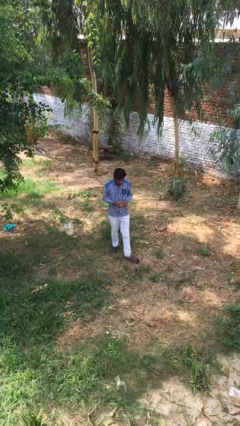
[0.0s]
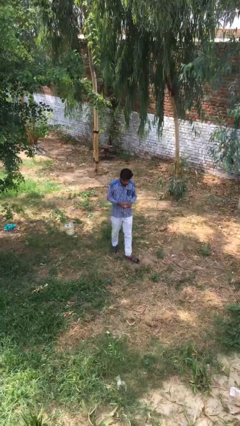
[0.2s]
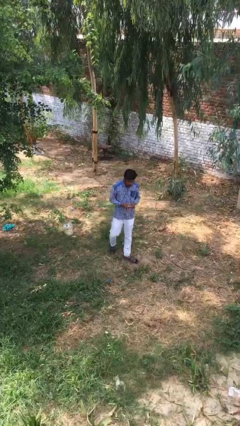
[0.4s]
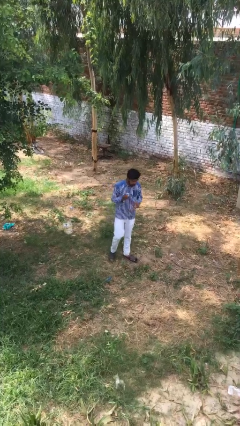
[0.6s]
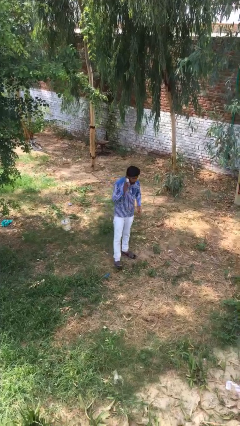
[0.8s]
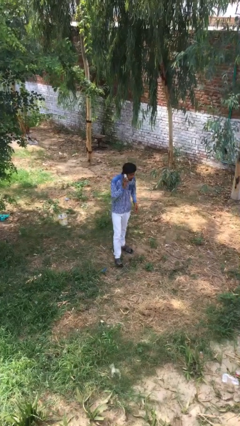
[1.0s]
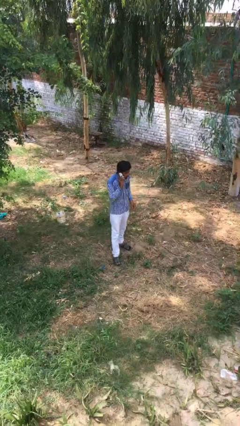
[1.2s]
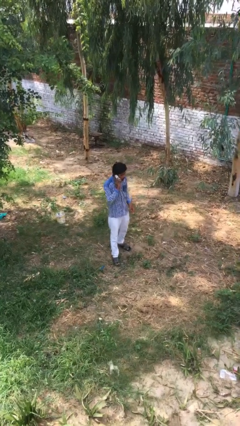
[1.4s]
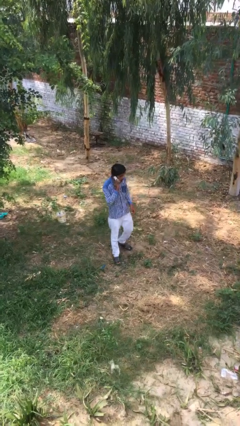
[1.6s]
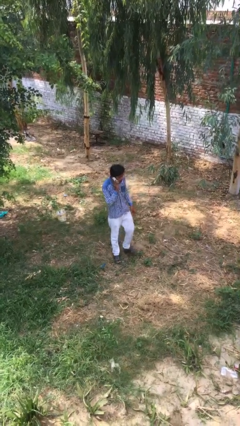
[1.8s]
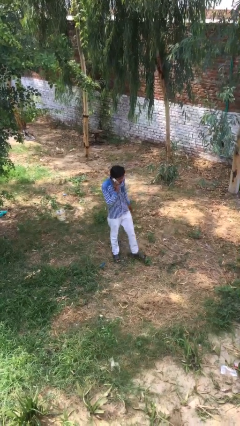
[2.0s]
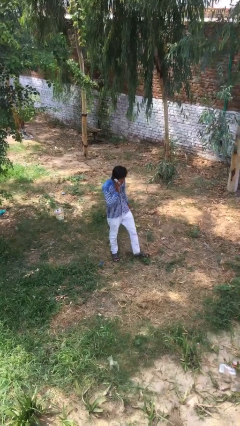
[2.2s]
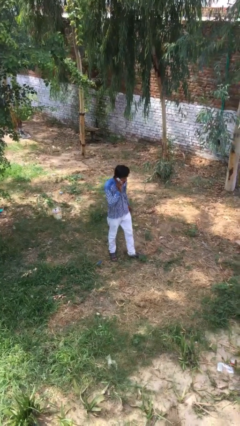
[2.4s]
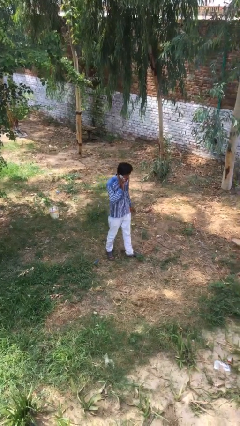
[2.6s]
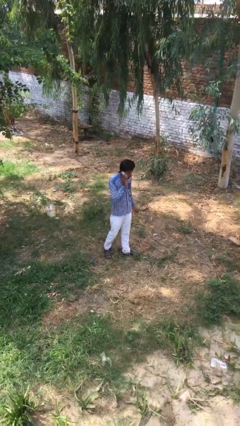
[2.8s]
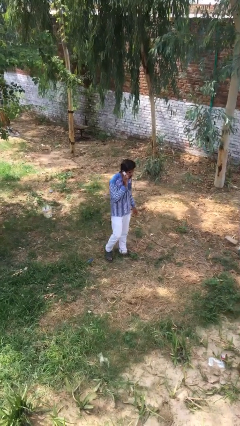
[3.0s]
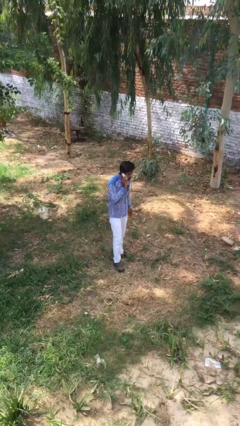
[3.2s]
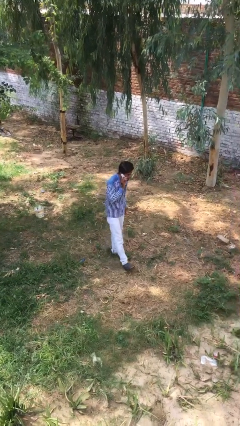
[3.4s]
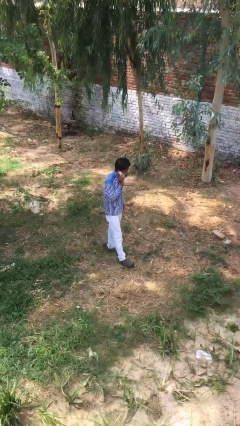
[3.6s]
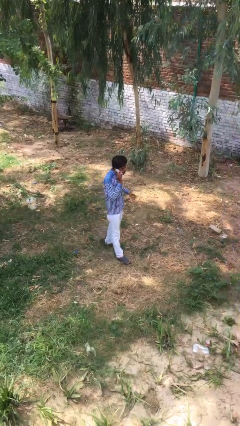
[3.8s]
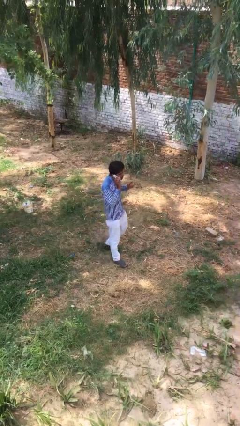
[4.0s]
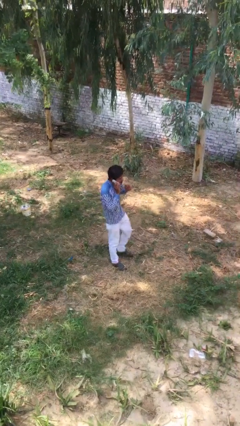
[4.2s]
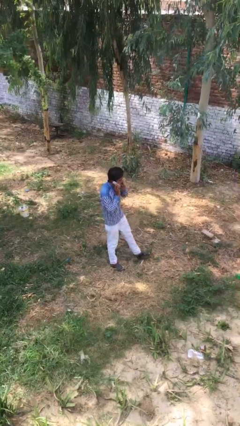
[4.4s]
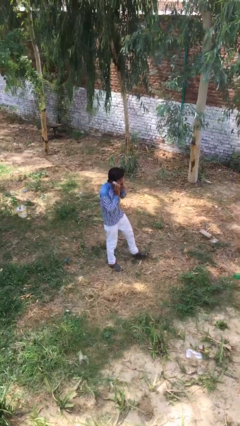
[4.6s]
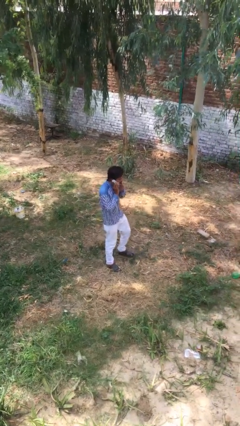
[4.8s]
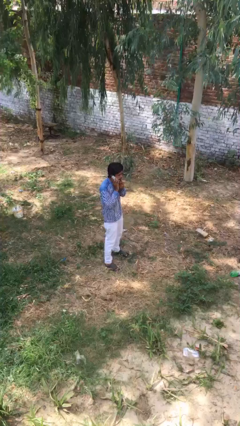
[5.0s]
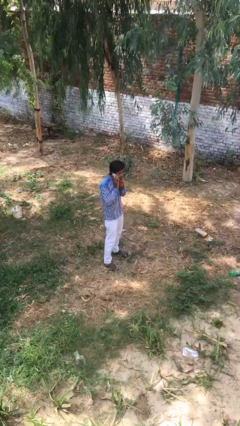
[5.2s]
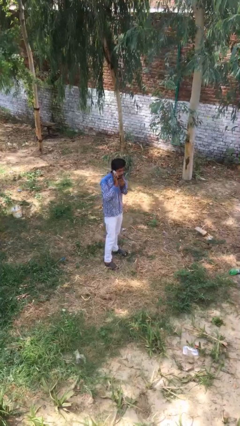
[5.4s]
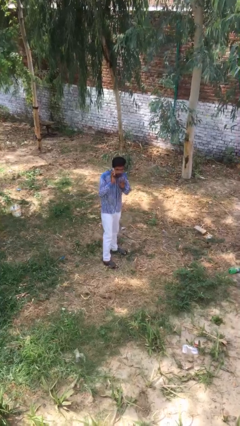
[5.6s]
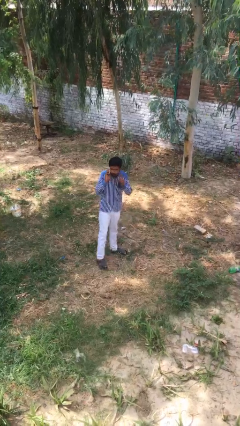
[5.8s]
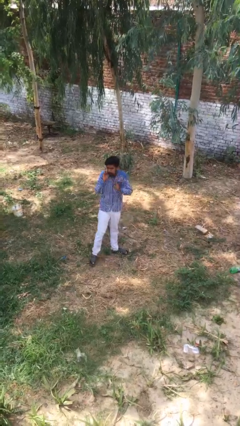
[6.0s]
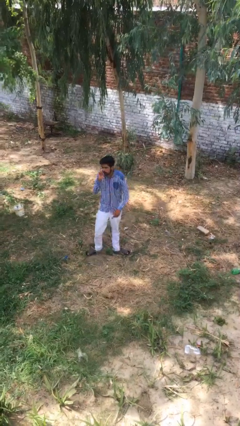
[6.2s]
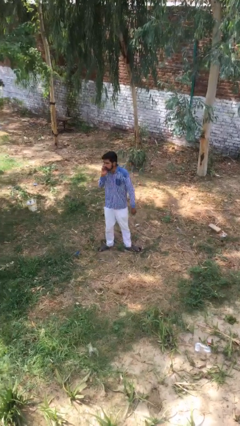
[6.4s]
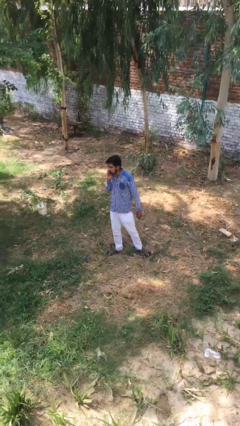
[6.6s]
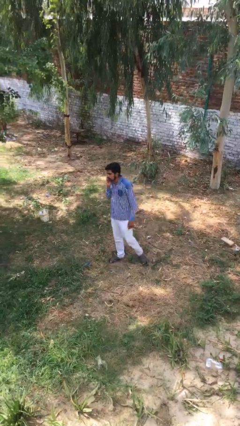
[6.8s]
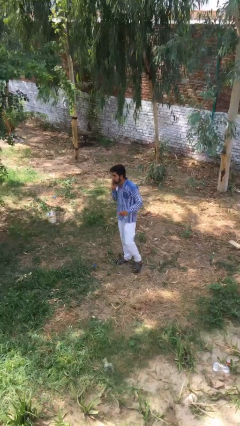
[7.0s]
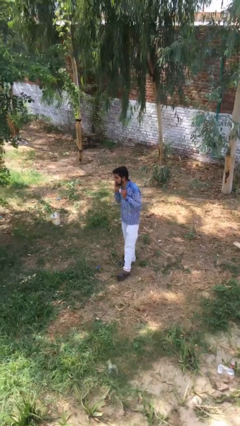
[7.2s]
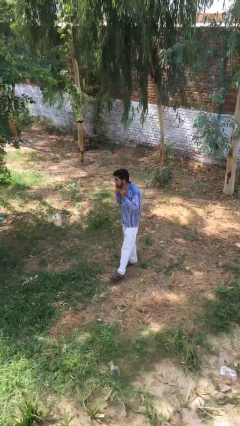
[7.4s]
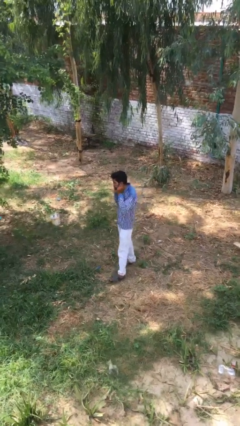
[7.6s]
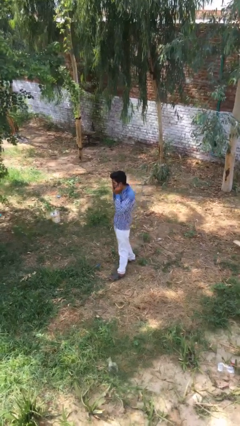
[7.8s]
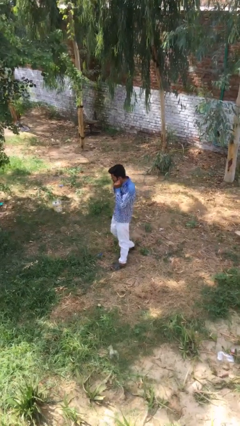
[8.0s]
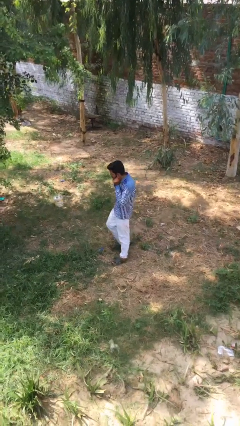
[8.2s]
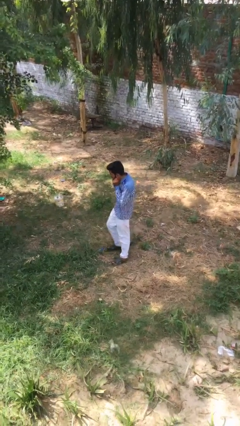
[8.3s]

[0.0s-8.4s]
person talks on phone

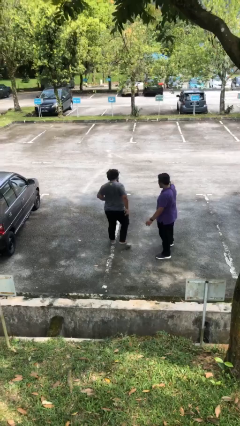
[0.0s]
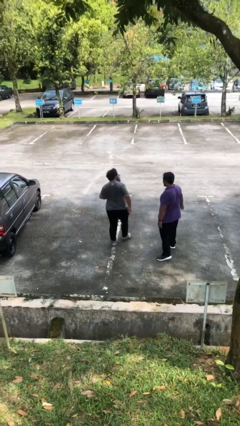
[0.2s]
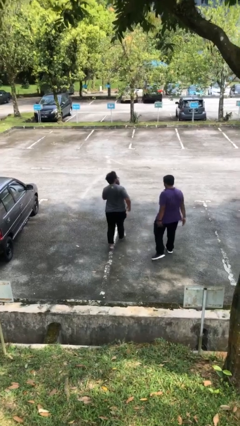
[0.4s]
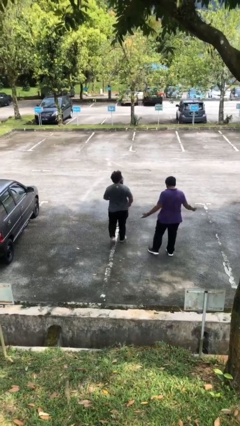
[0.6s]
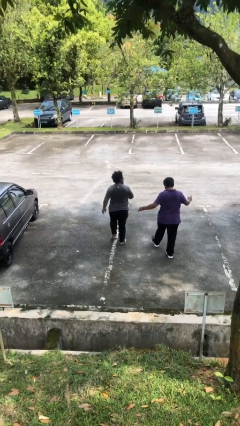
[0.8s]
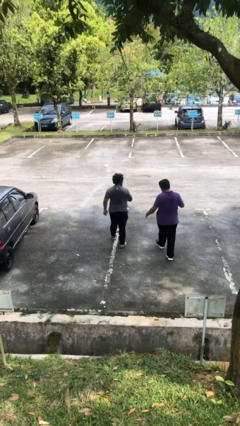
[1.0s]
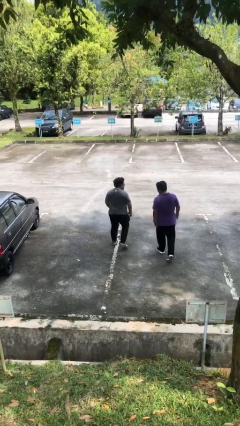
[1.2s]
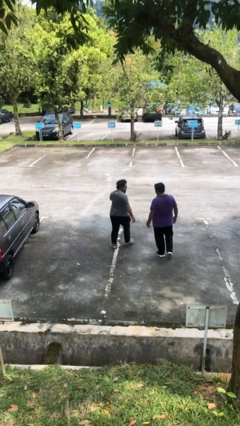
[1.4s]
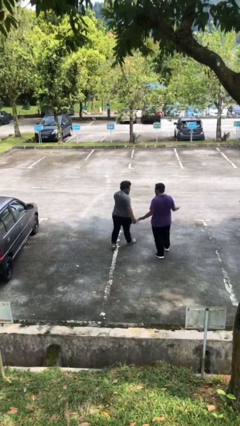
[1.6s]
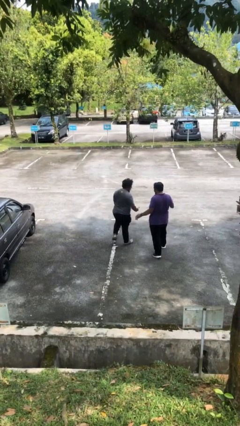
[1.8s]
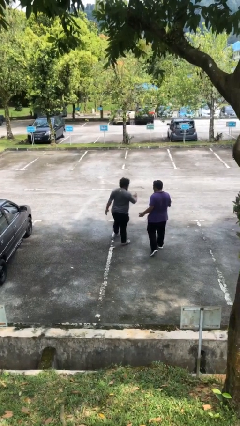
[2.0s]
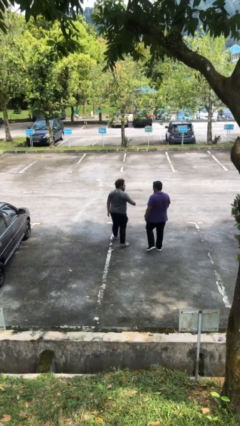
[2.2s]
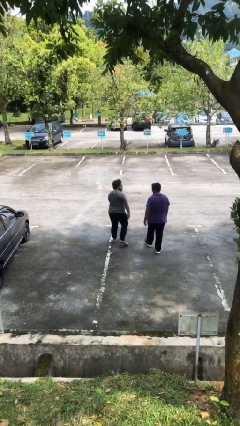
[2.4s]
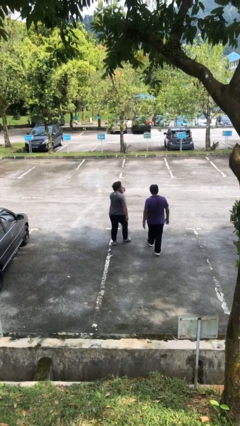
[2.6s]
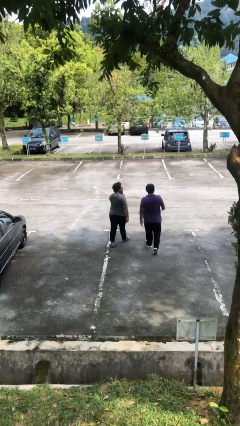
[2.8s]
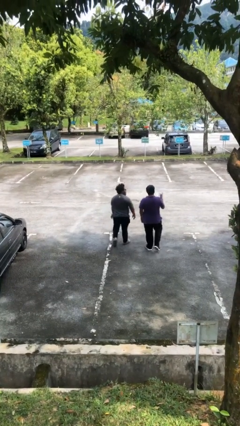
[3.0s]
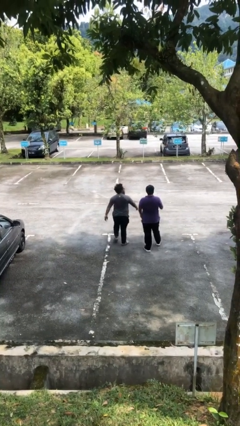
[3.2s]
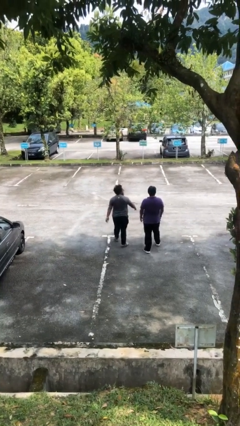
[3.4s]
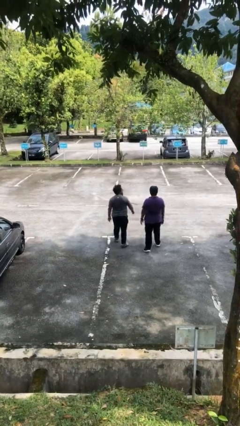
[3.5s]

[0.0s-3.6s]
person talks to person

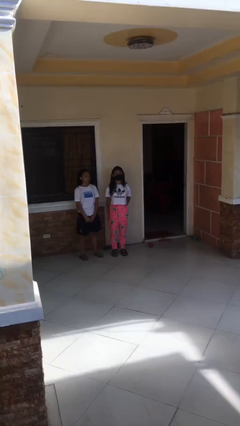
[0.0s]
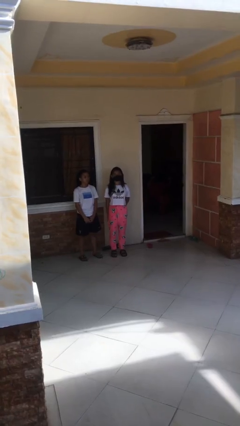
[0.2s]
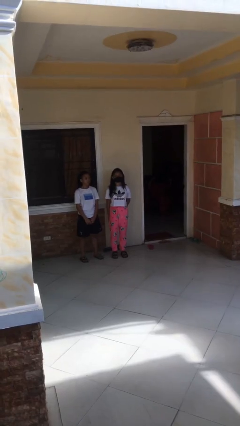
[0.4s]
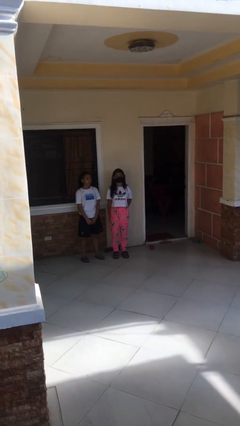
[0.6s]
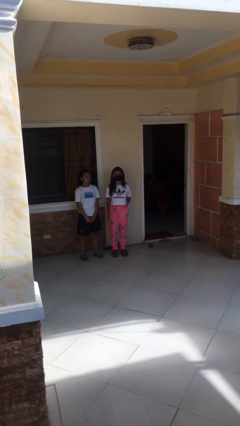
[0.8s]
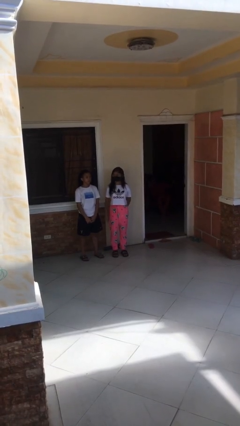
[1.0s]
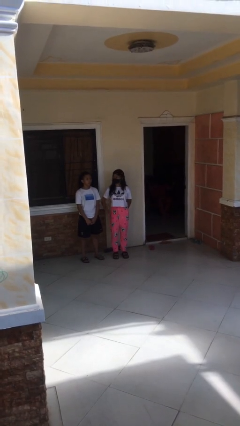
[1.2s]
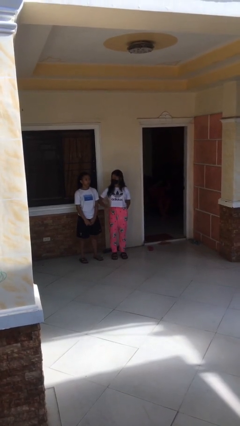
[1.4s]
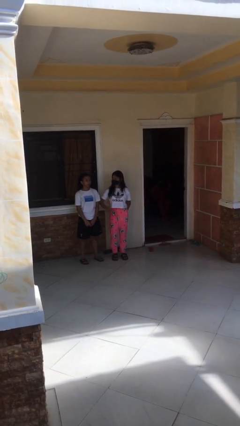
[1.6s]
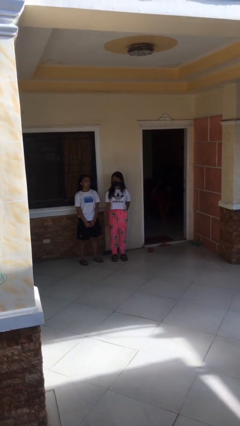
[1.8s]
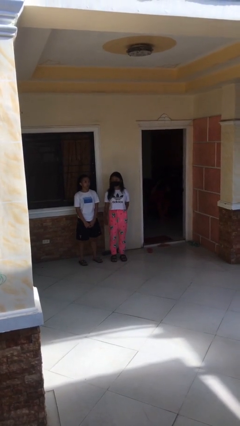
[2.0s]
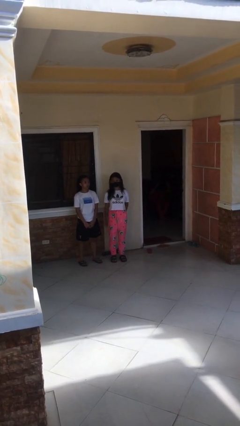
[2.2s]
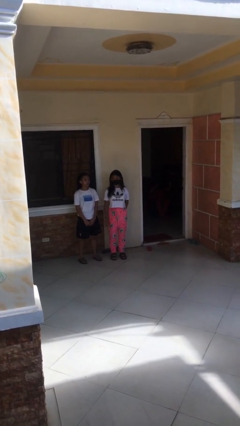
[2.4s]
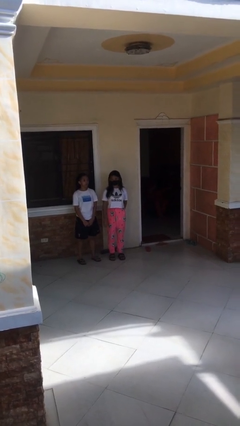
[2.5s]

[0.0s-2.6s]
person nudges person with elbow

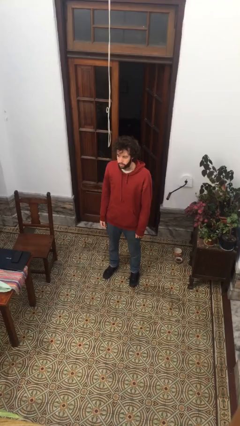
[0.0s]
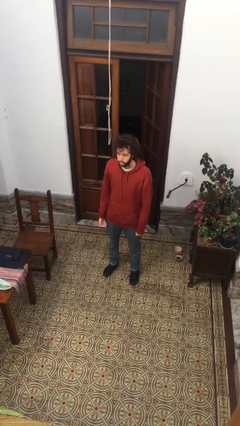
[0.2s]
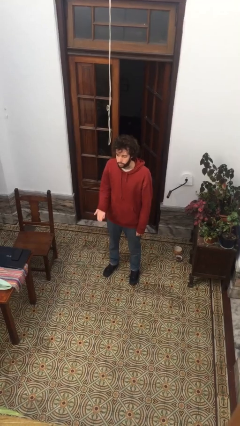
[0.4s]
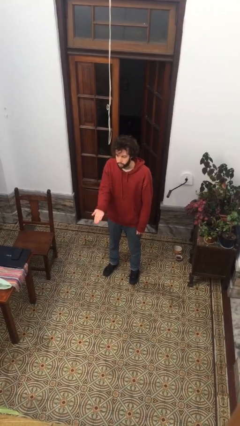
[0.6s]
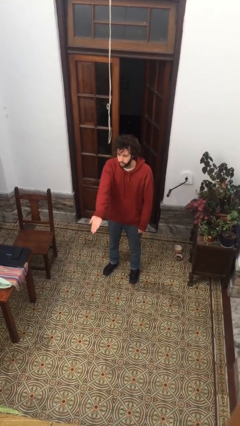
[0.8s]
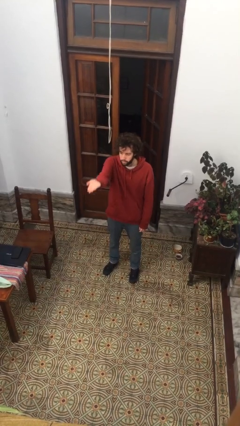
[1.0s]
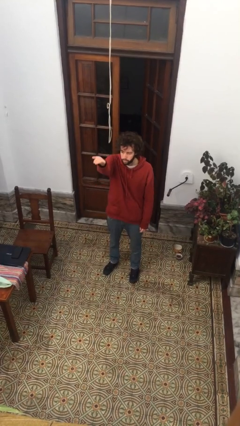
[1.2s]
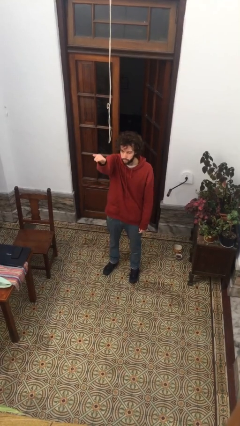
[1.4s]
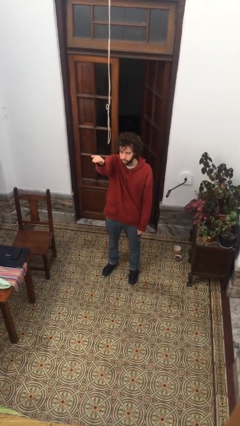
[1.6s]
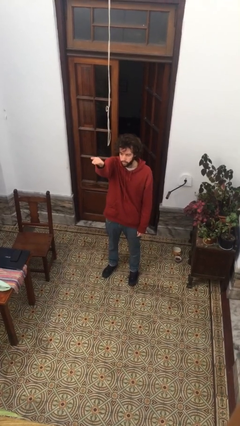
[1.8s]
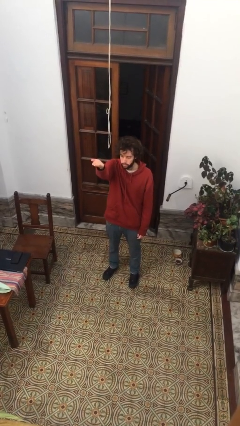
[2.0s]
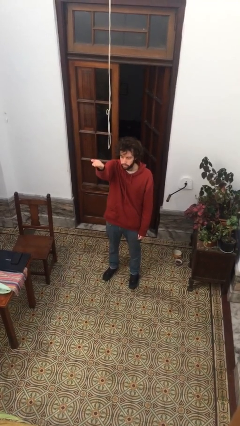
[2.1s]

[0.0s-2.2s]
person gestures swipe up

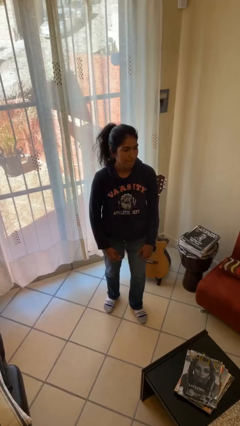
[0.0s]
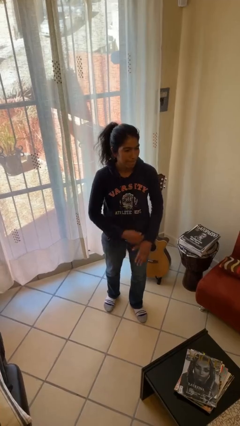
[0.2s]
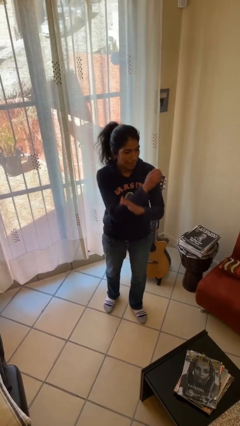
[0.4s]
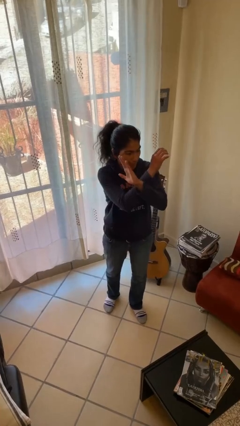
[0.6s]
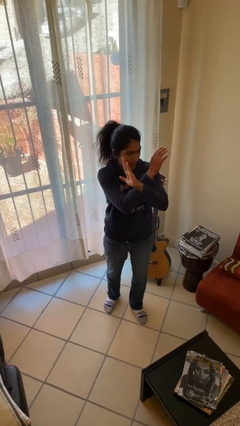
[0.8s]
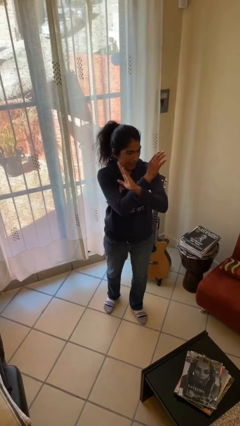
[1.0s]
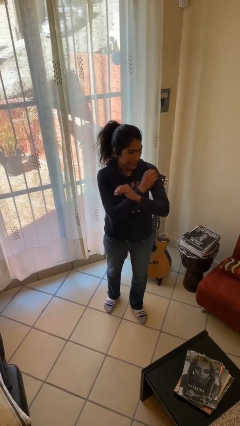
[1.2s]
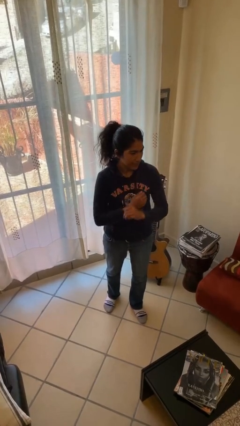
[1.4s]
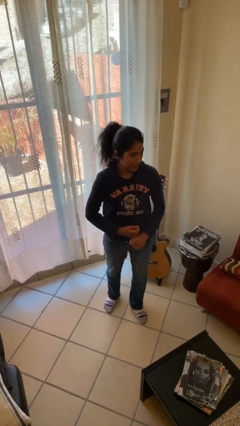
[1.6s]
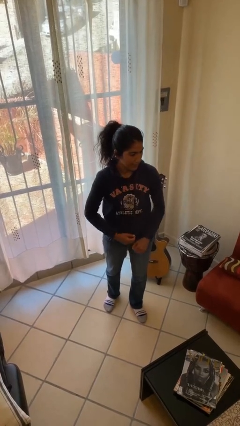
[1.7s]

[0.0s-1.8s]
person gestures arms x
